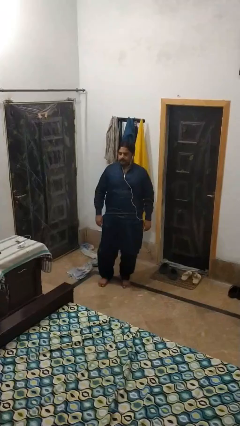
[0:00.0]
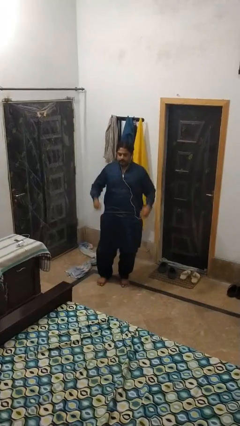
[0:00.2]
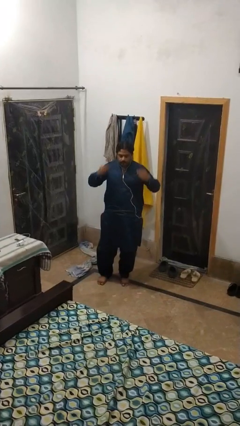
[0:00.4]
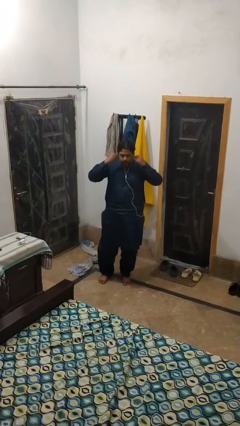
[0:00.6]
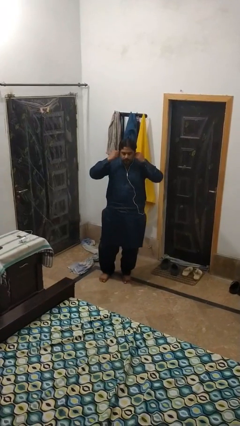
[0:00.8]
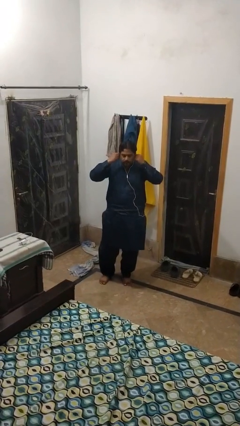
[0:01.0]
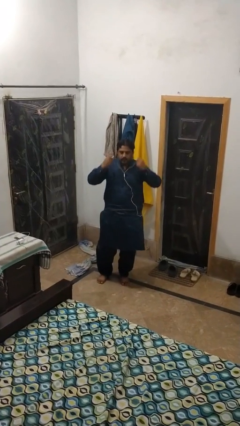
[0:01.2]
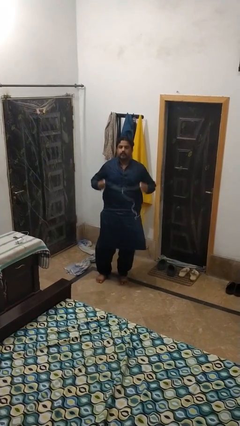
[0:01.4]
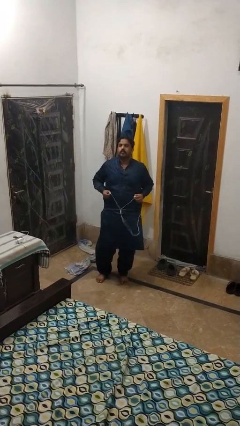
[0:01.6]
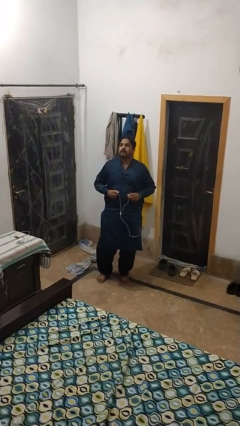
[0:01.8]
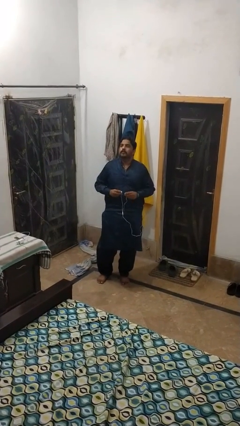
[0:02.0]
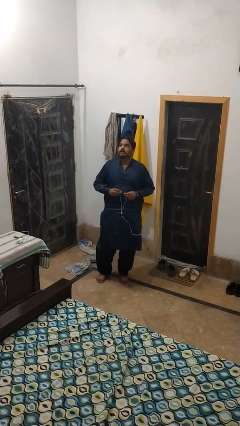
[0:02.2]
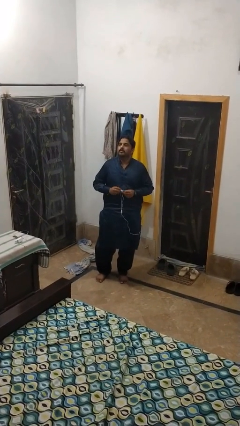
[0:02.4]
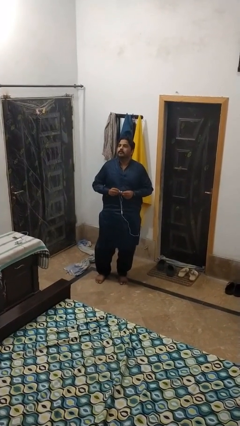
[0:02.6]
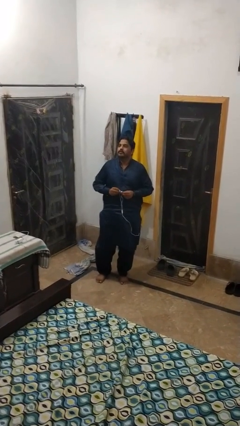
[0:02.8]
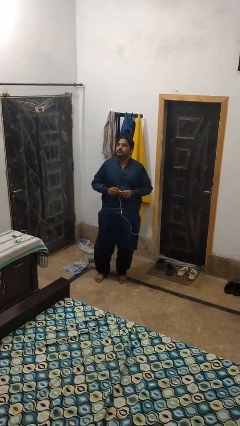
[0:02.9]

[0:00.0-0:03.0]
person takes off headphones

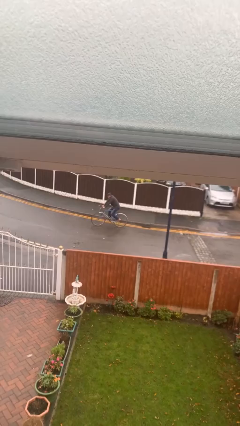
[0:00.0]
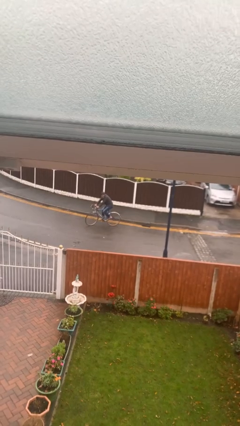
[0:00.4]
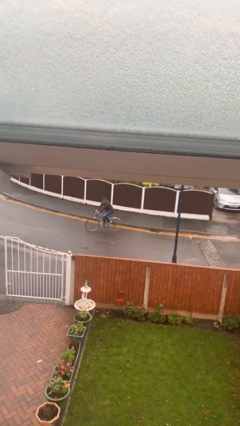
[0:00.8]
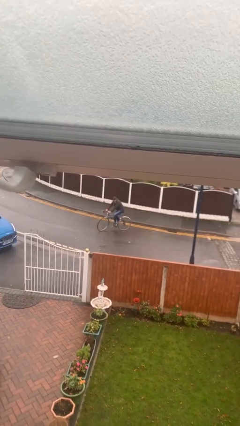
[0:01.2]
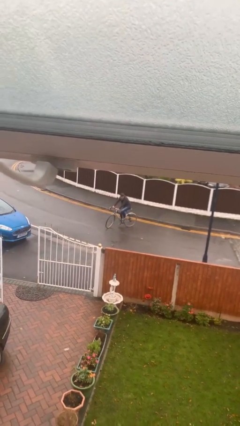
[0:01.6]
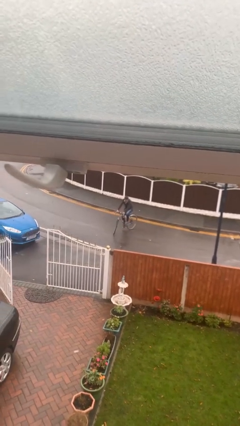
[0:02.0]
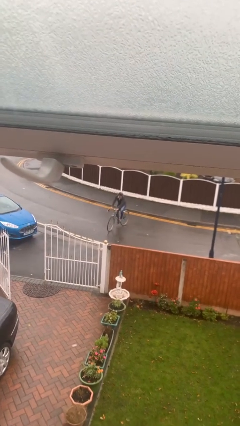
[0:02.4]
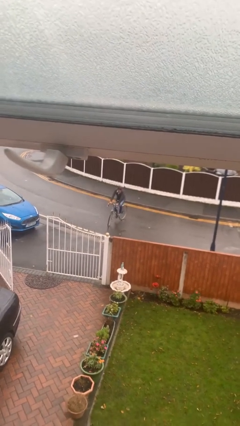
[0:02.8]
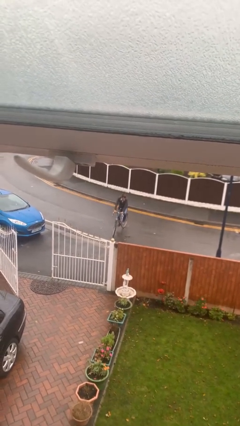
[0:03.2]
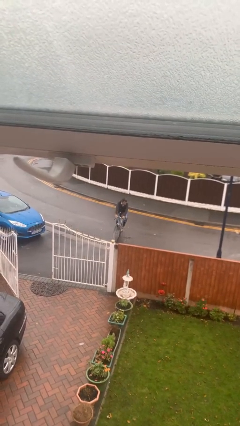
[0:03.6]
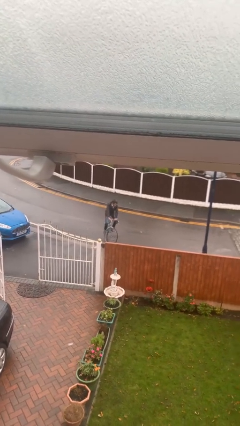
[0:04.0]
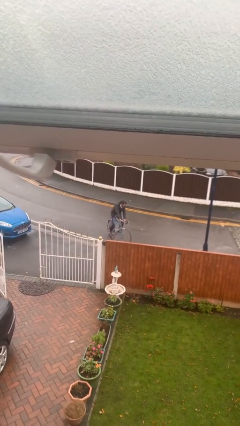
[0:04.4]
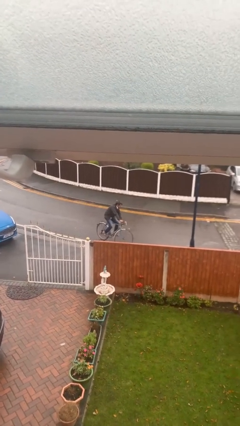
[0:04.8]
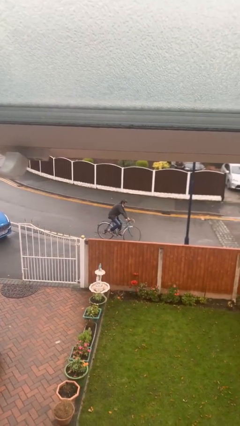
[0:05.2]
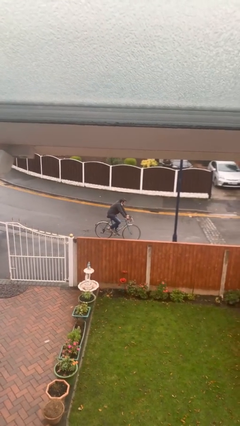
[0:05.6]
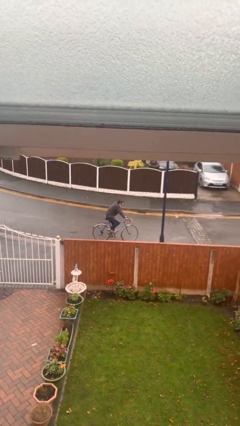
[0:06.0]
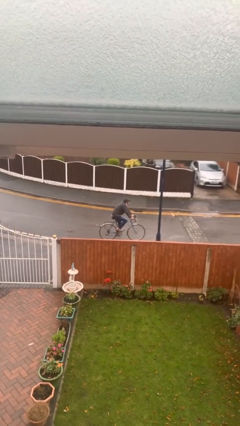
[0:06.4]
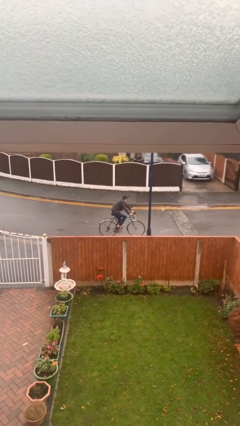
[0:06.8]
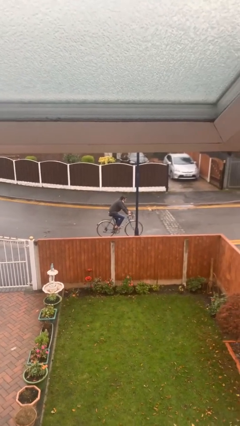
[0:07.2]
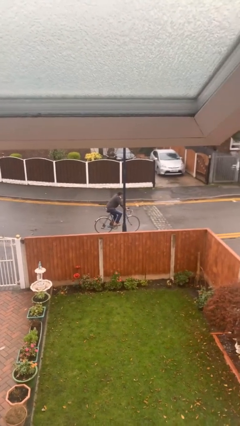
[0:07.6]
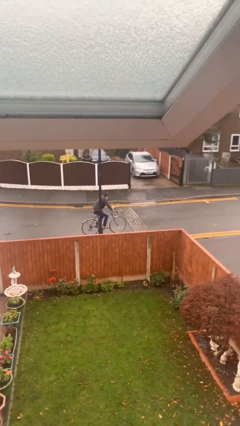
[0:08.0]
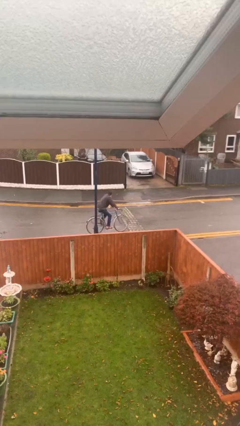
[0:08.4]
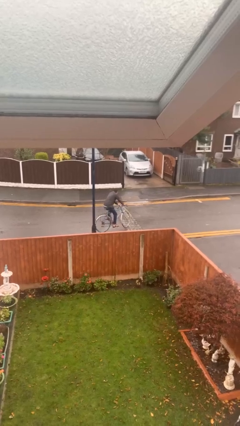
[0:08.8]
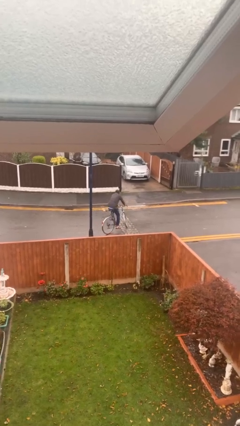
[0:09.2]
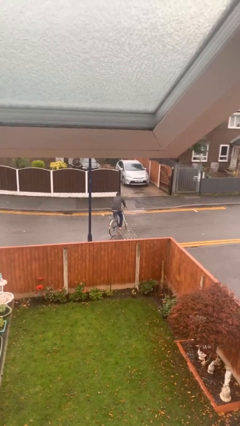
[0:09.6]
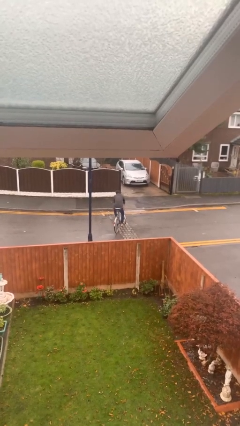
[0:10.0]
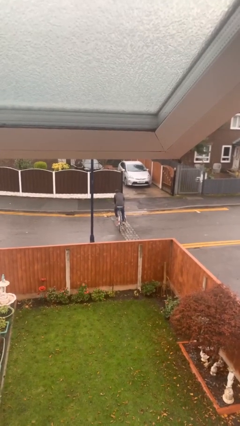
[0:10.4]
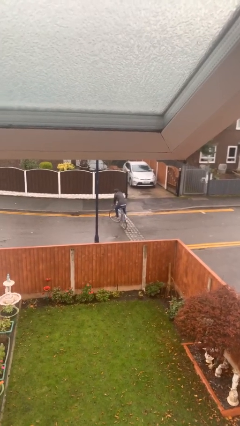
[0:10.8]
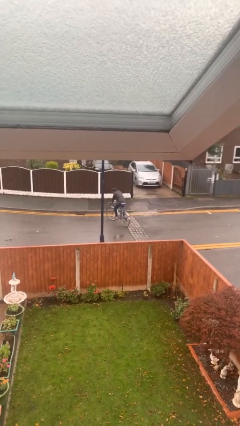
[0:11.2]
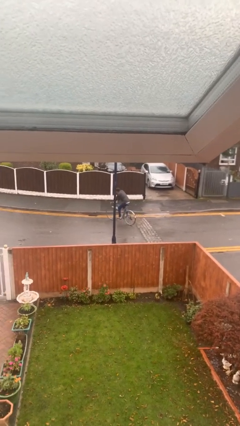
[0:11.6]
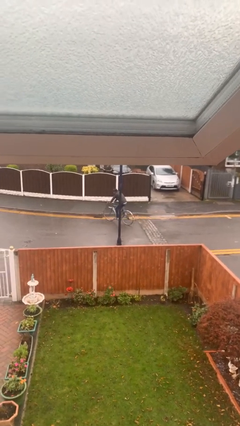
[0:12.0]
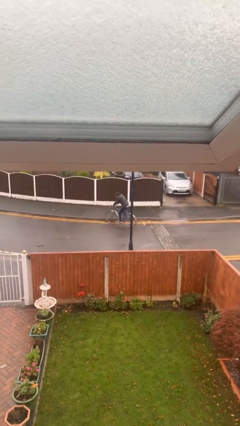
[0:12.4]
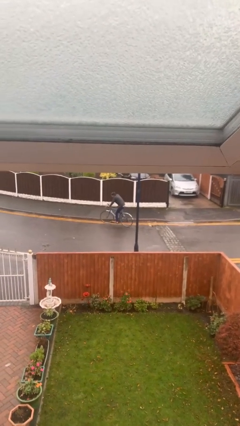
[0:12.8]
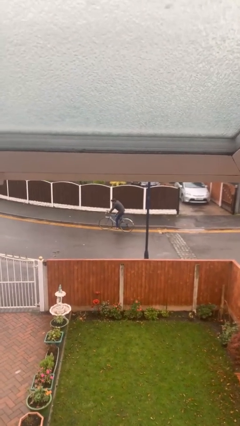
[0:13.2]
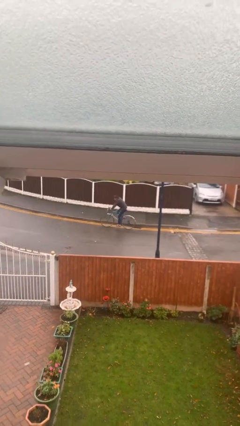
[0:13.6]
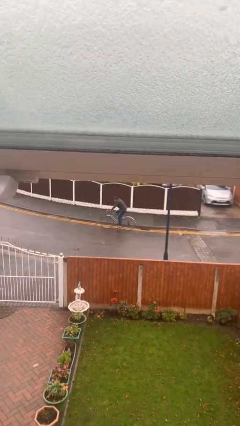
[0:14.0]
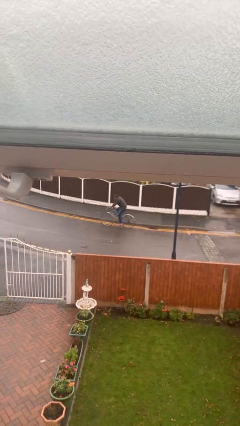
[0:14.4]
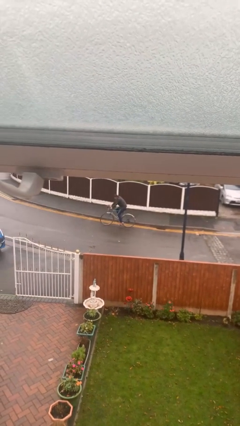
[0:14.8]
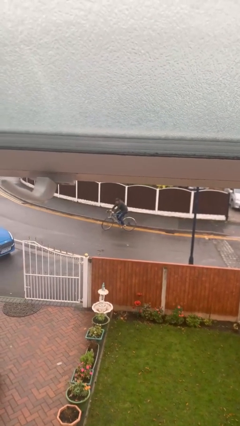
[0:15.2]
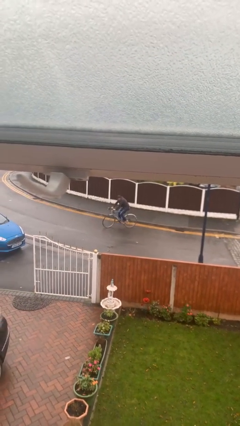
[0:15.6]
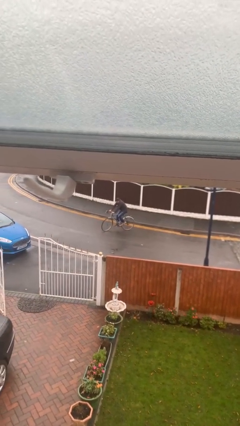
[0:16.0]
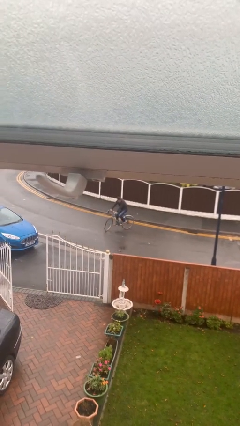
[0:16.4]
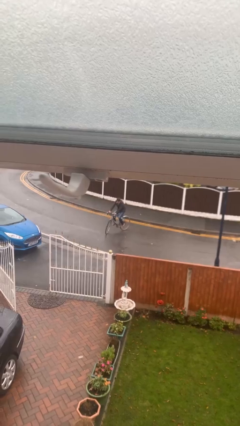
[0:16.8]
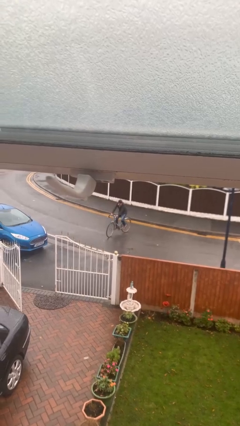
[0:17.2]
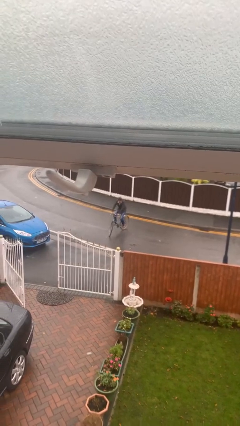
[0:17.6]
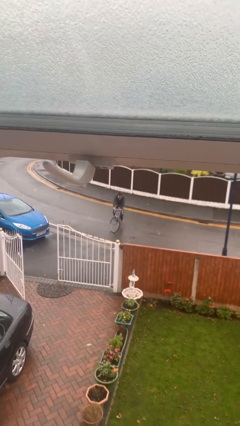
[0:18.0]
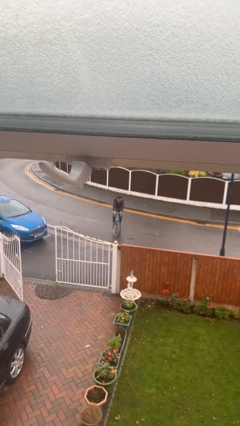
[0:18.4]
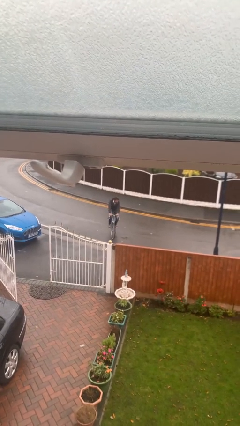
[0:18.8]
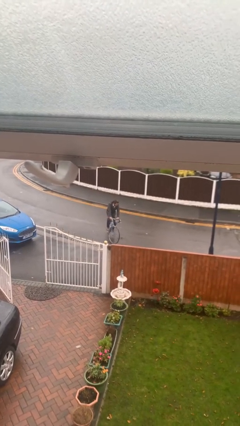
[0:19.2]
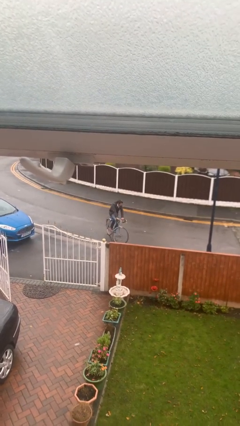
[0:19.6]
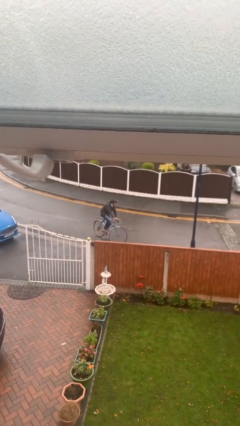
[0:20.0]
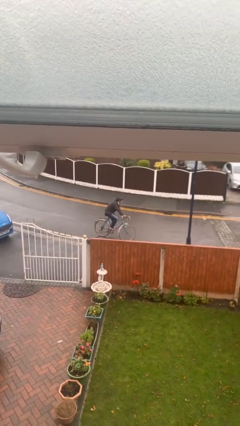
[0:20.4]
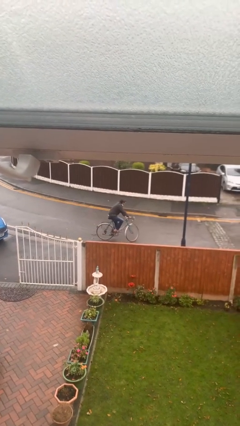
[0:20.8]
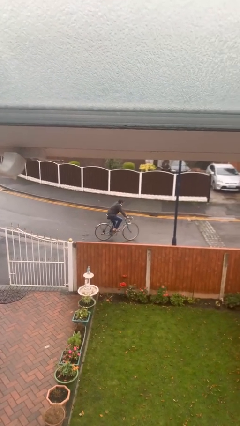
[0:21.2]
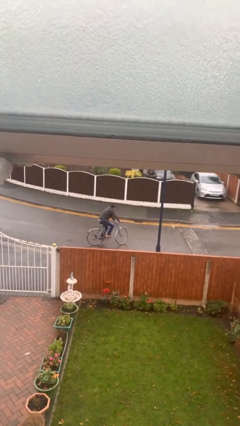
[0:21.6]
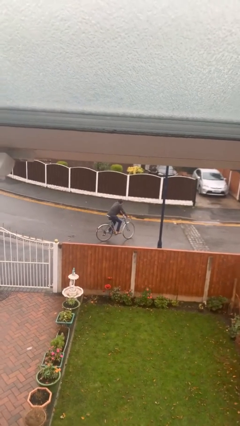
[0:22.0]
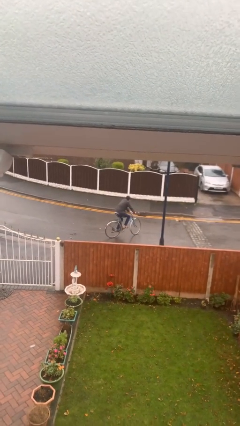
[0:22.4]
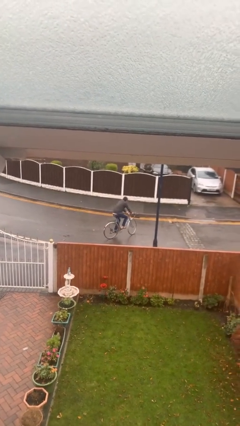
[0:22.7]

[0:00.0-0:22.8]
person rides bicycle

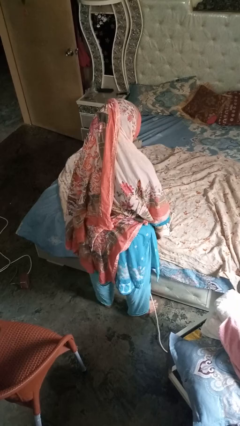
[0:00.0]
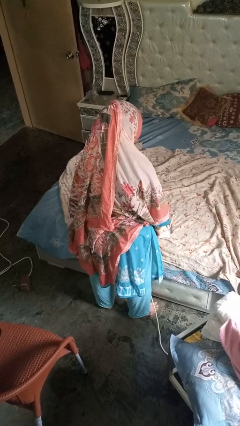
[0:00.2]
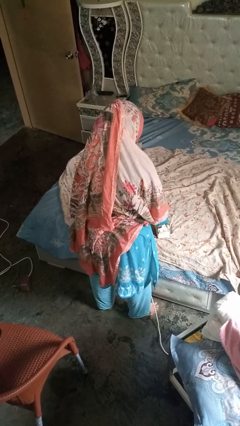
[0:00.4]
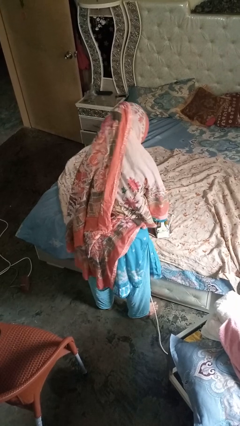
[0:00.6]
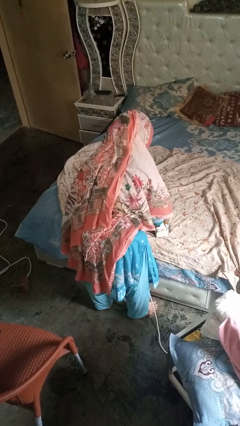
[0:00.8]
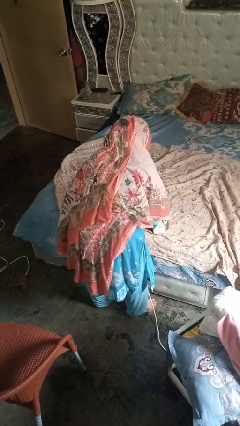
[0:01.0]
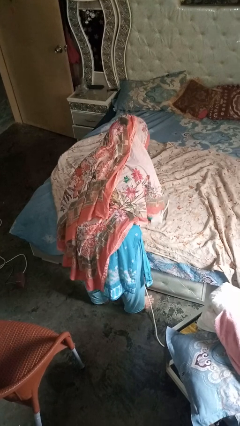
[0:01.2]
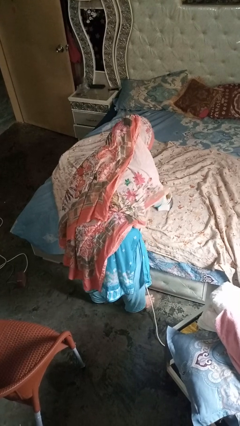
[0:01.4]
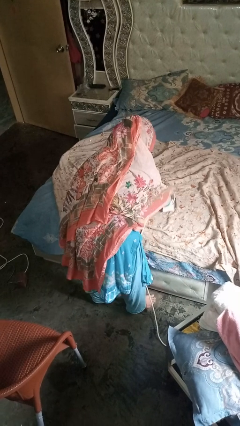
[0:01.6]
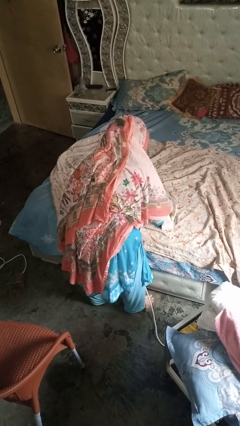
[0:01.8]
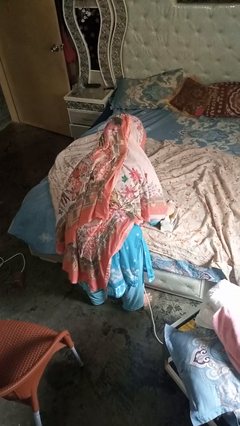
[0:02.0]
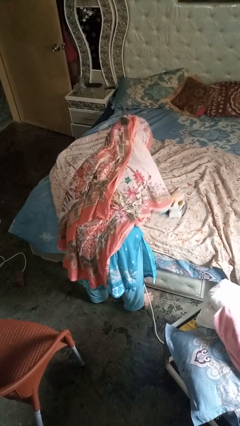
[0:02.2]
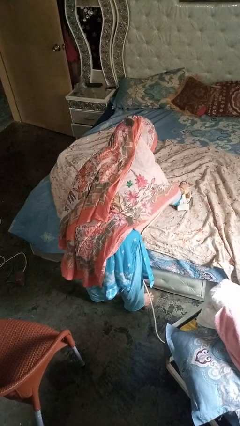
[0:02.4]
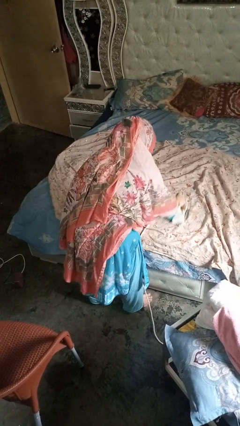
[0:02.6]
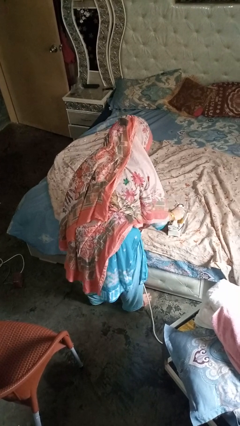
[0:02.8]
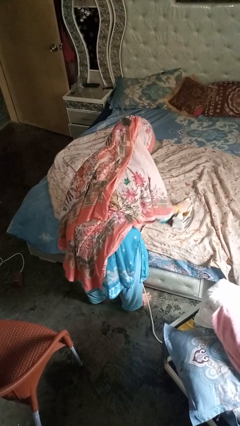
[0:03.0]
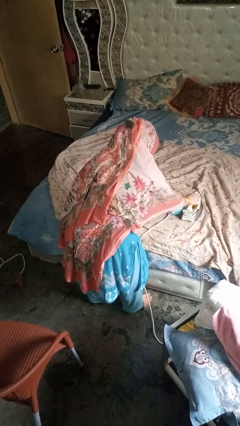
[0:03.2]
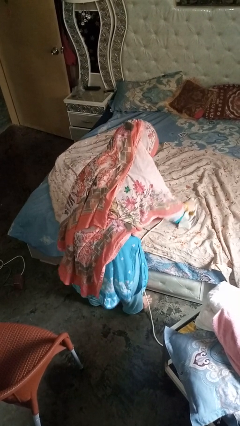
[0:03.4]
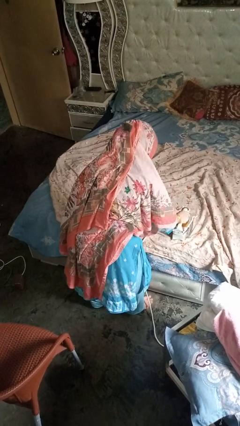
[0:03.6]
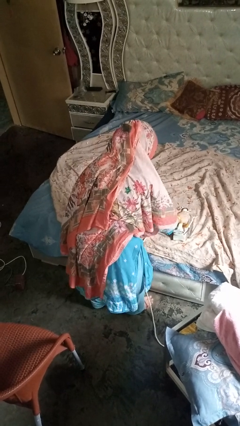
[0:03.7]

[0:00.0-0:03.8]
person irons clothes
